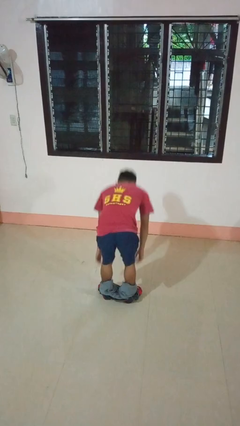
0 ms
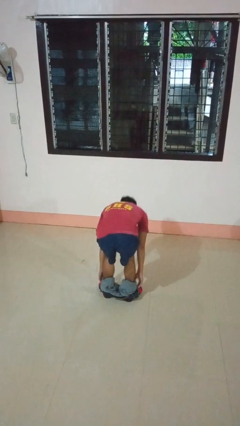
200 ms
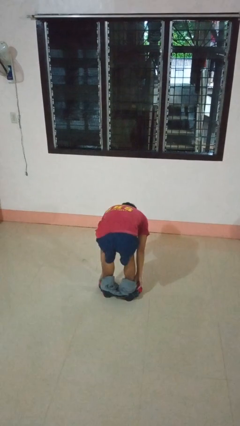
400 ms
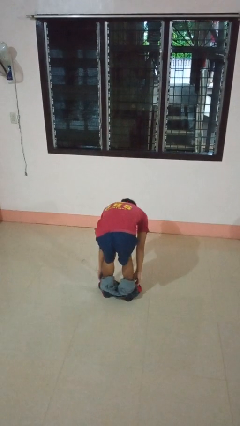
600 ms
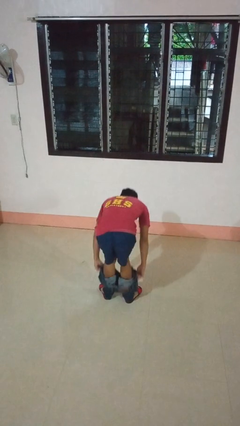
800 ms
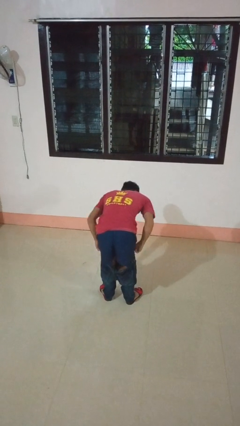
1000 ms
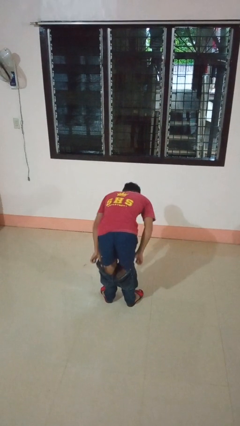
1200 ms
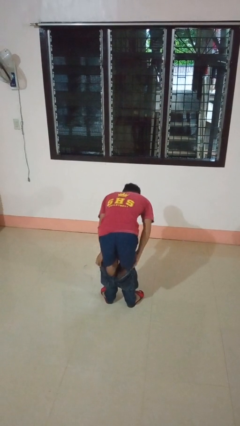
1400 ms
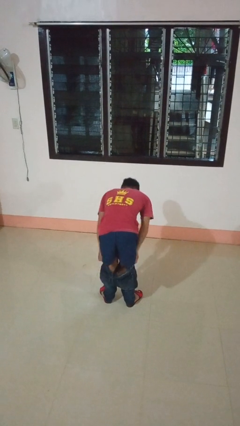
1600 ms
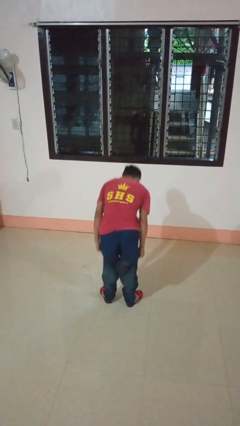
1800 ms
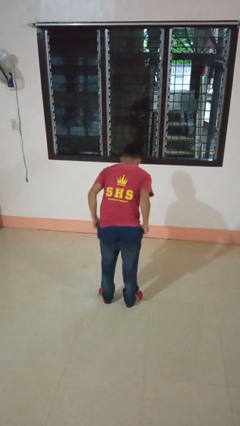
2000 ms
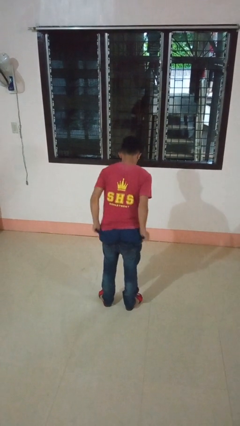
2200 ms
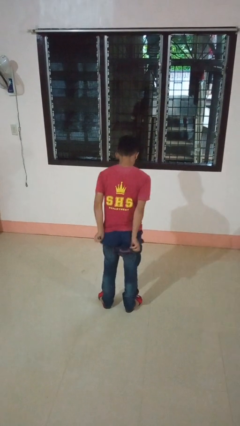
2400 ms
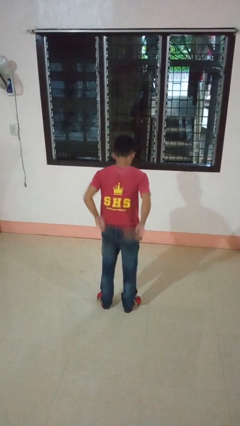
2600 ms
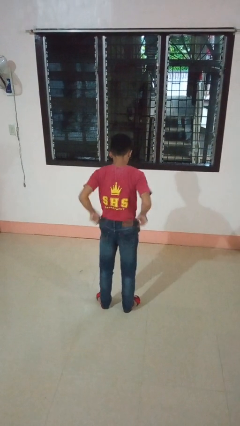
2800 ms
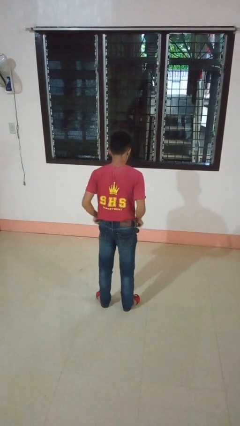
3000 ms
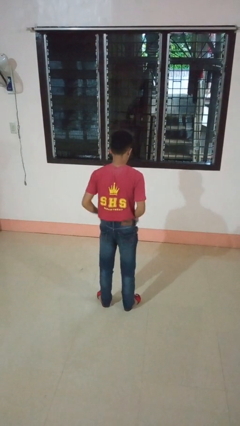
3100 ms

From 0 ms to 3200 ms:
person puts on pants

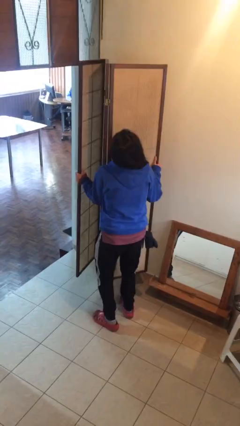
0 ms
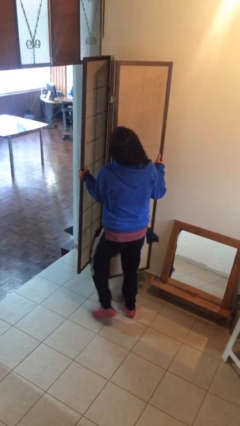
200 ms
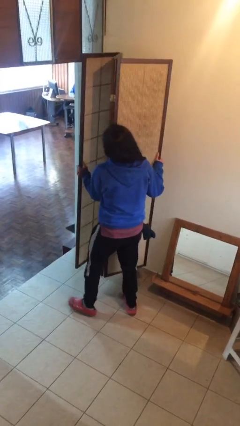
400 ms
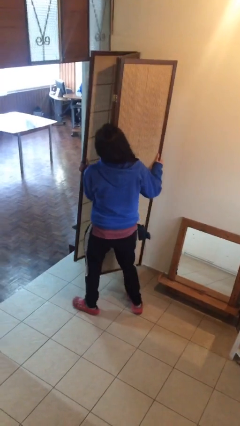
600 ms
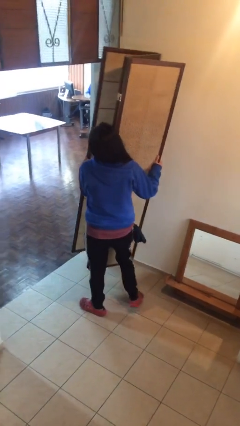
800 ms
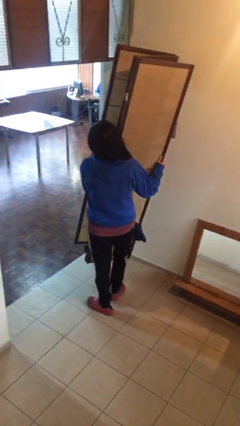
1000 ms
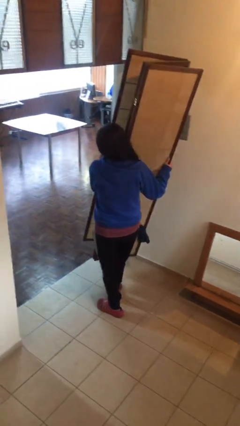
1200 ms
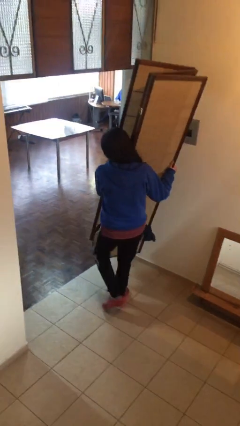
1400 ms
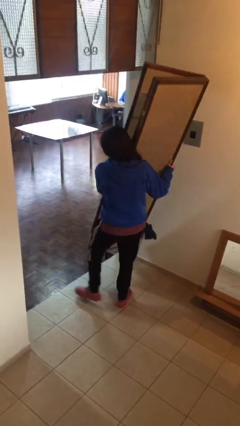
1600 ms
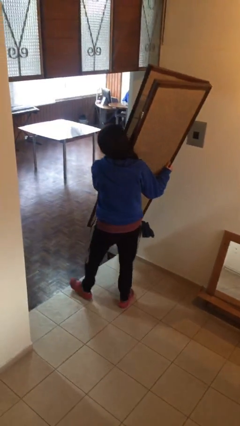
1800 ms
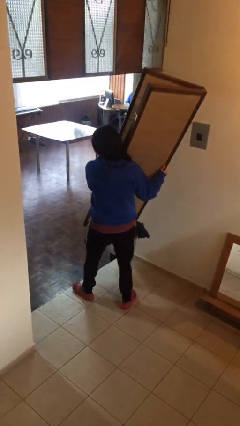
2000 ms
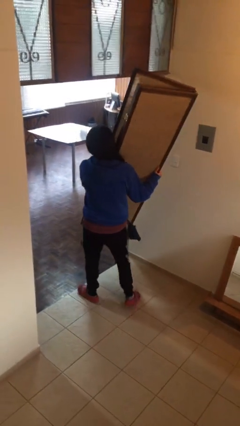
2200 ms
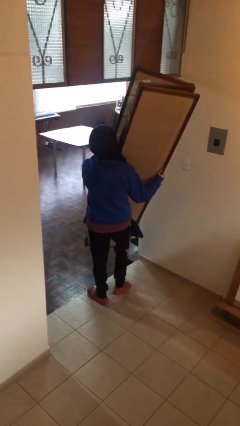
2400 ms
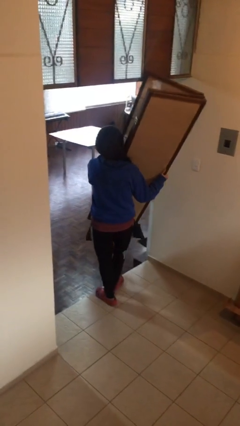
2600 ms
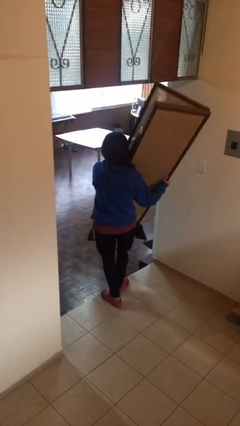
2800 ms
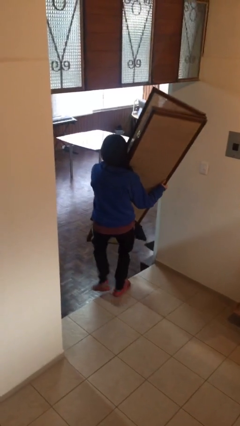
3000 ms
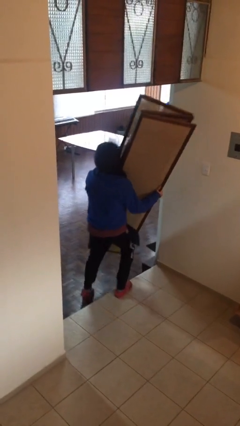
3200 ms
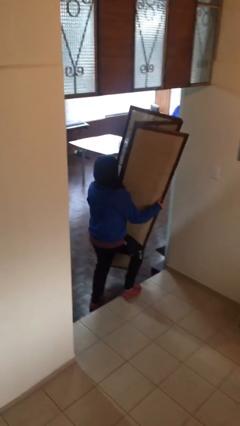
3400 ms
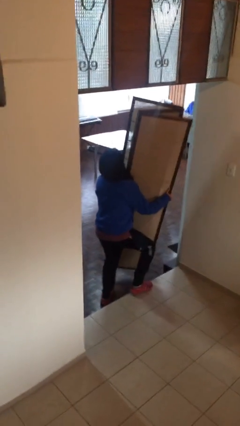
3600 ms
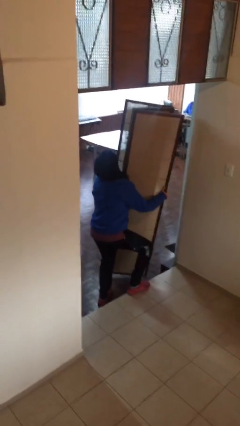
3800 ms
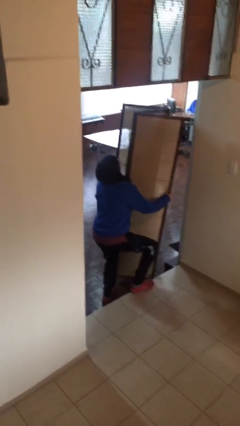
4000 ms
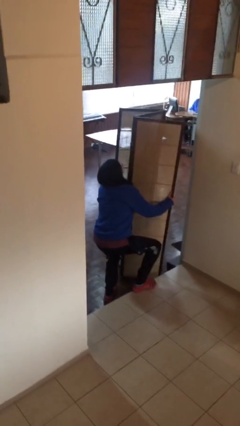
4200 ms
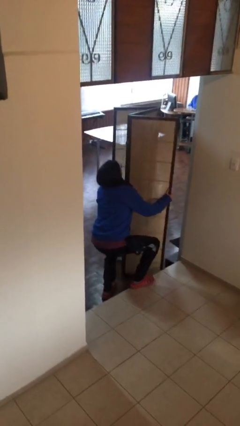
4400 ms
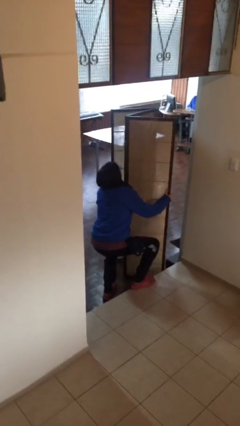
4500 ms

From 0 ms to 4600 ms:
person carries heavy object

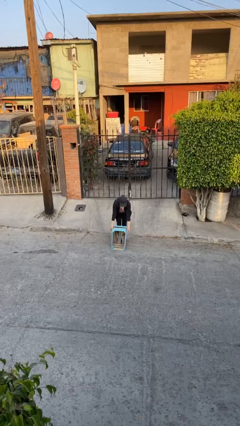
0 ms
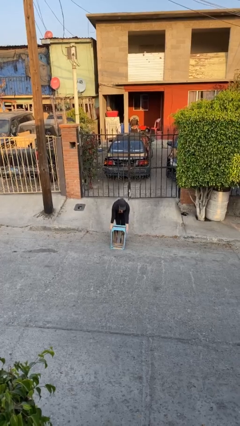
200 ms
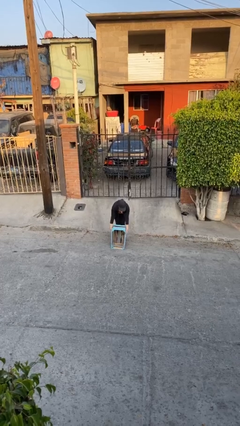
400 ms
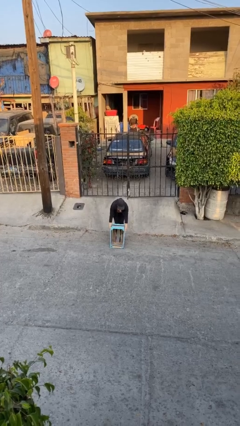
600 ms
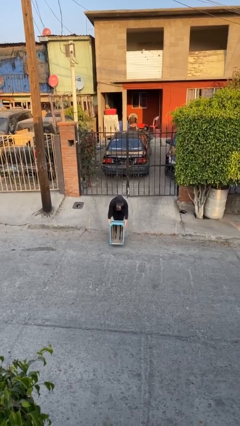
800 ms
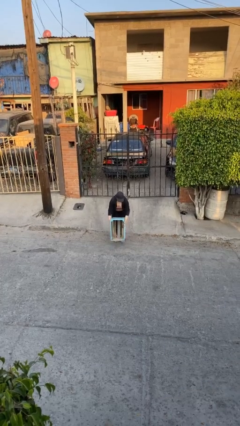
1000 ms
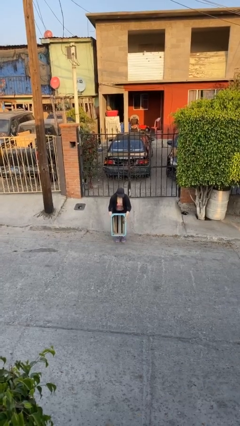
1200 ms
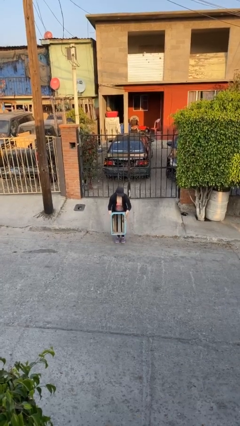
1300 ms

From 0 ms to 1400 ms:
person picks up object from floor

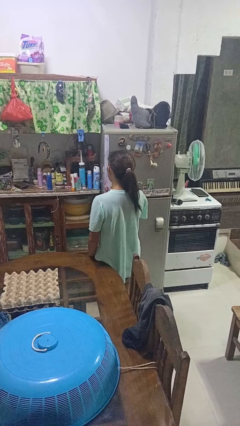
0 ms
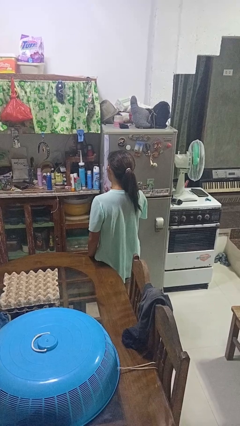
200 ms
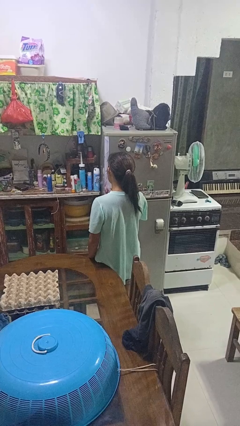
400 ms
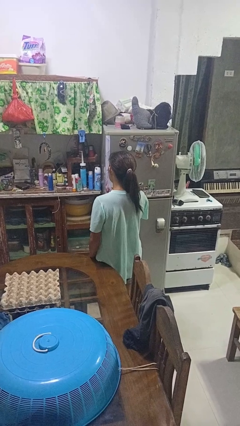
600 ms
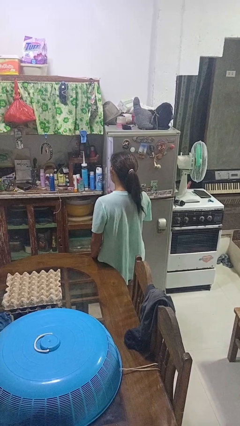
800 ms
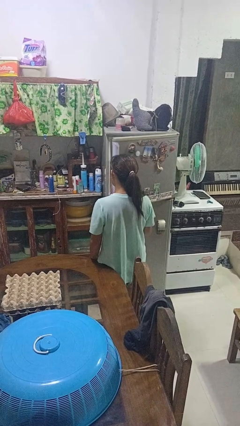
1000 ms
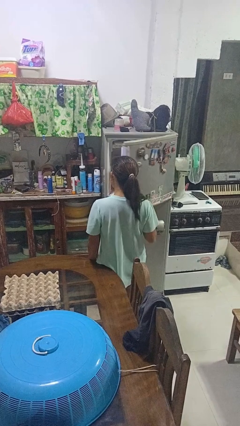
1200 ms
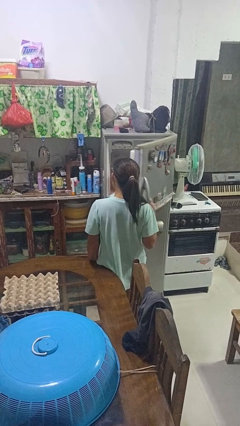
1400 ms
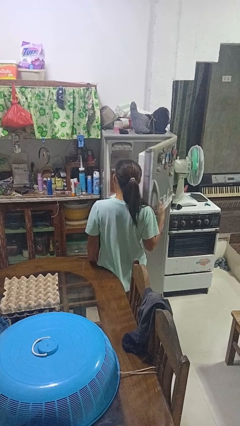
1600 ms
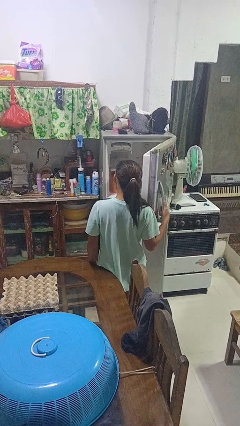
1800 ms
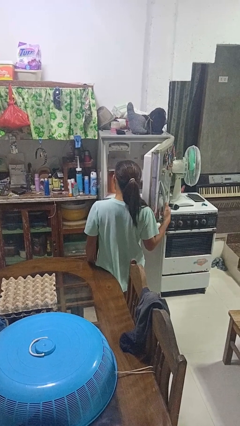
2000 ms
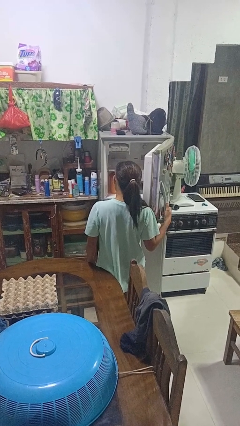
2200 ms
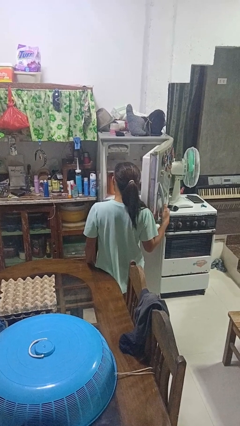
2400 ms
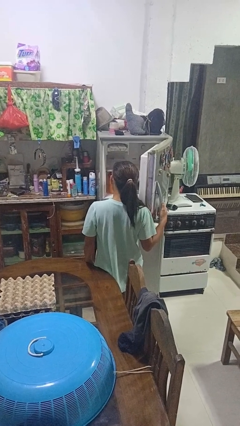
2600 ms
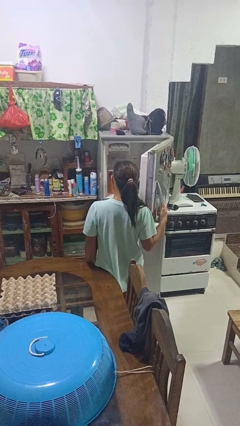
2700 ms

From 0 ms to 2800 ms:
person opens refrigerator

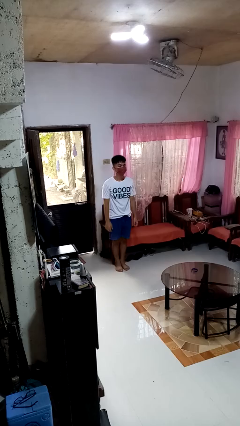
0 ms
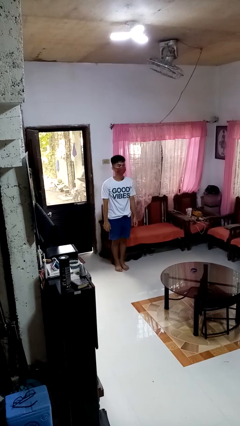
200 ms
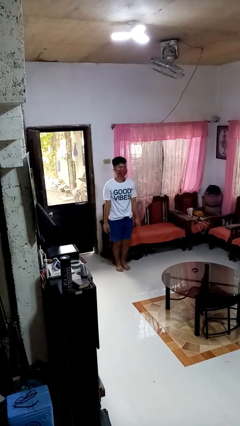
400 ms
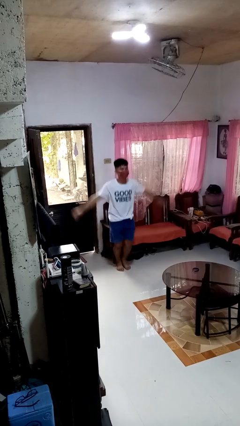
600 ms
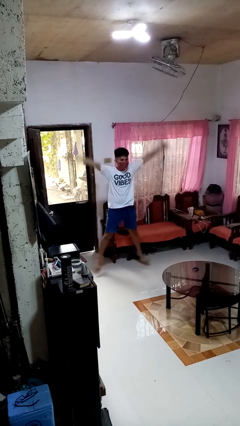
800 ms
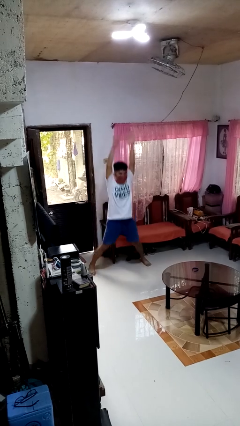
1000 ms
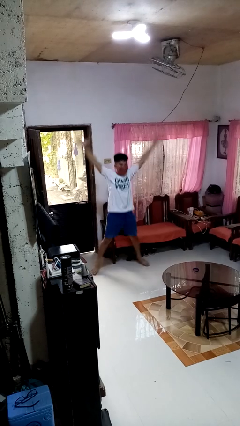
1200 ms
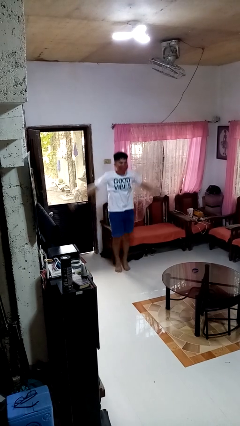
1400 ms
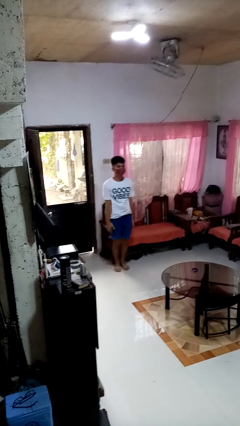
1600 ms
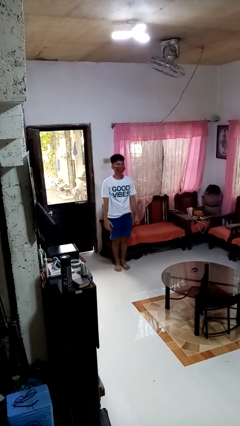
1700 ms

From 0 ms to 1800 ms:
person exercises with jumping jacks

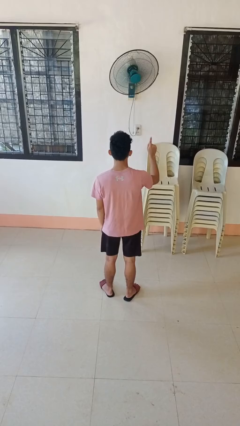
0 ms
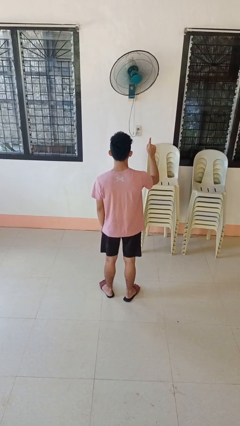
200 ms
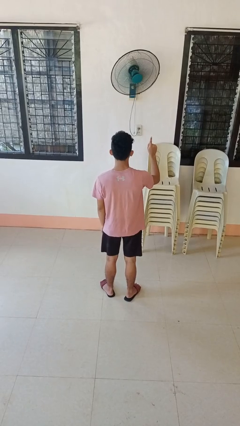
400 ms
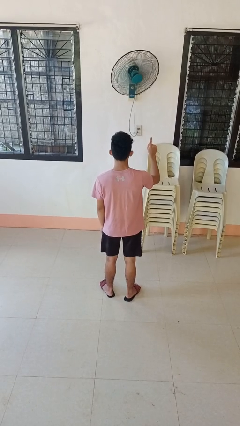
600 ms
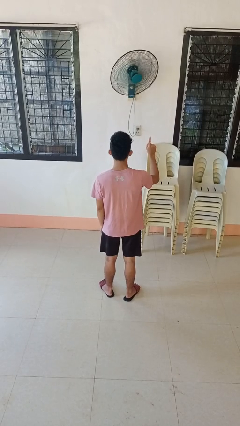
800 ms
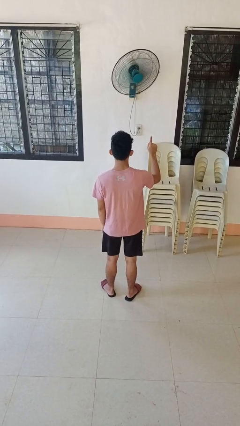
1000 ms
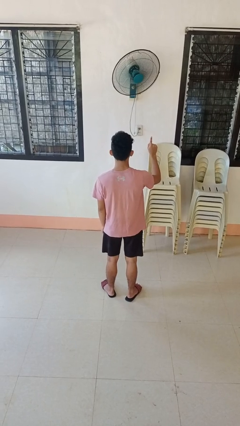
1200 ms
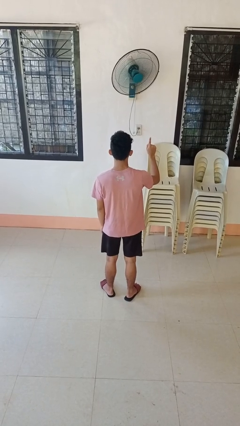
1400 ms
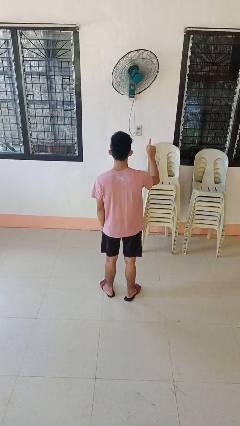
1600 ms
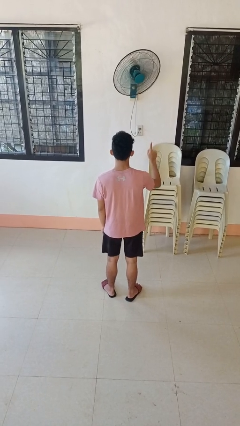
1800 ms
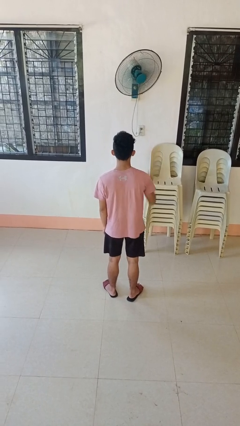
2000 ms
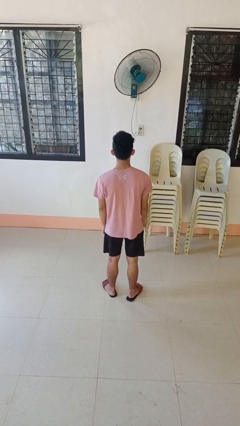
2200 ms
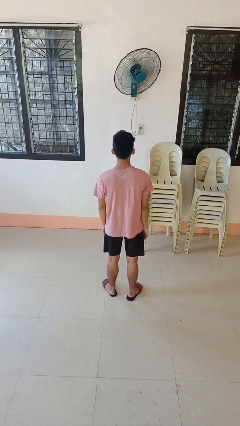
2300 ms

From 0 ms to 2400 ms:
person gestures number one

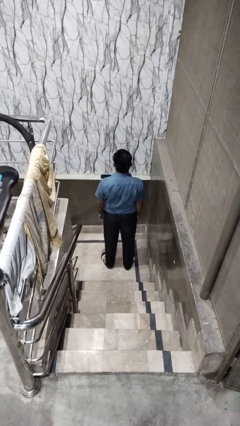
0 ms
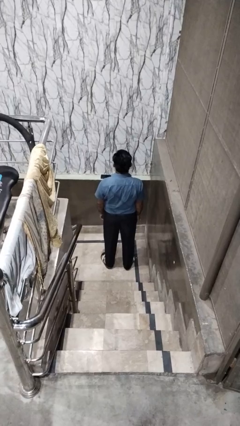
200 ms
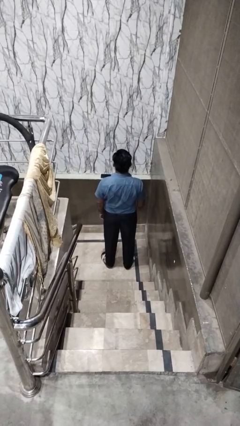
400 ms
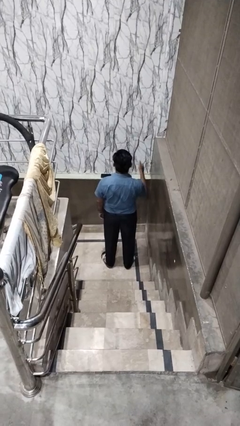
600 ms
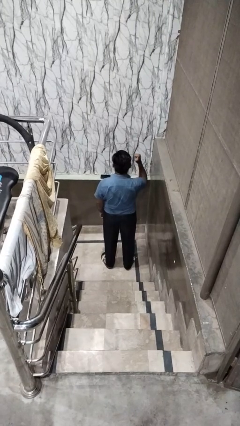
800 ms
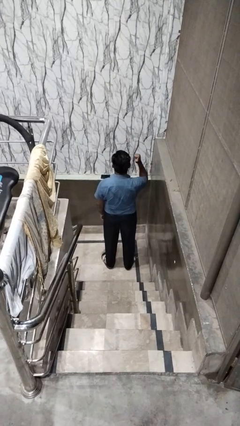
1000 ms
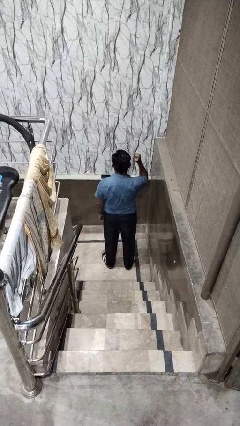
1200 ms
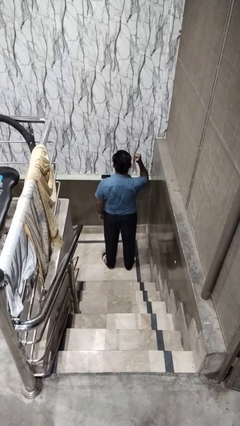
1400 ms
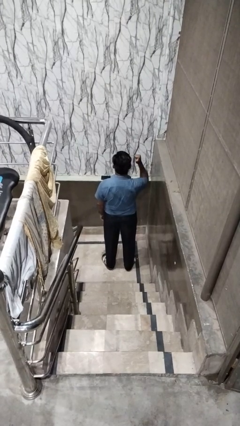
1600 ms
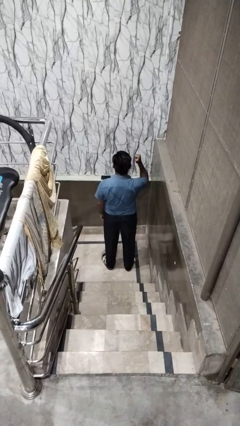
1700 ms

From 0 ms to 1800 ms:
person gestures behind me
